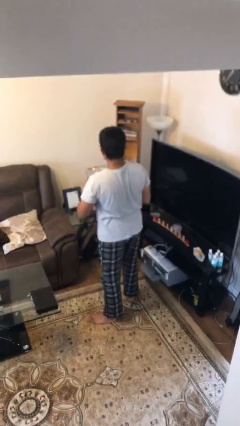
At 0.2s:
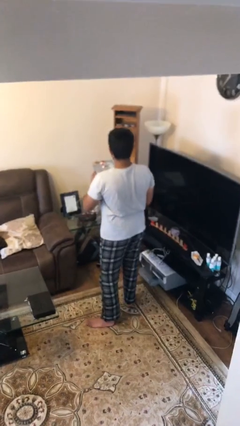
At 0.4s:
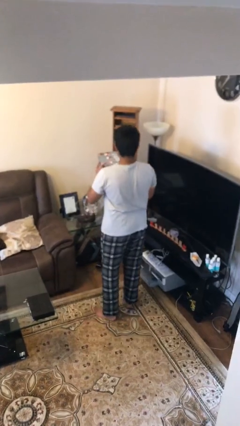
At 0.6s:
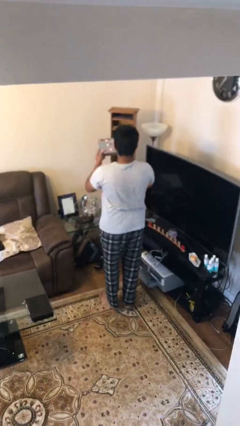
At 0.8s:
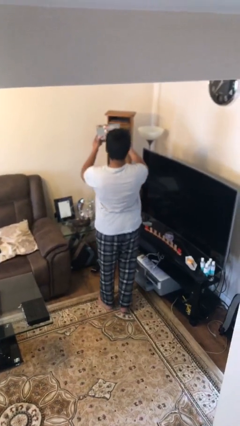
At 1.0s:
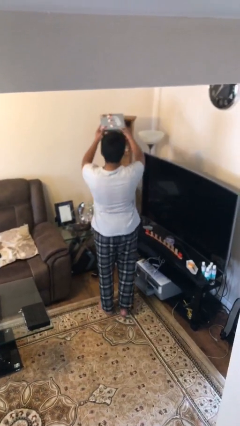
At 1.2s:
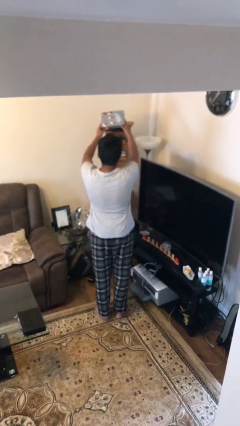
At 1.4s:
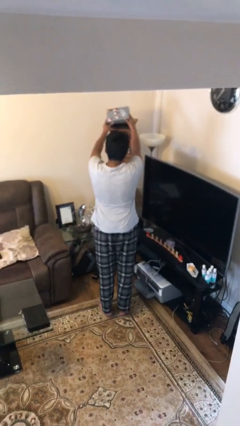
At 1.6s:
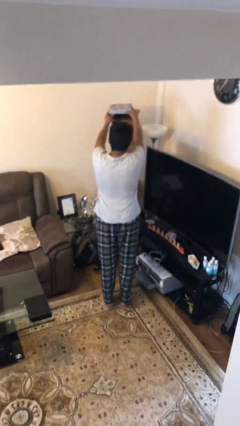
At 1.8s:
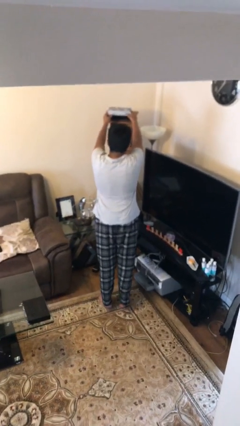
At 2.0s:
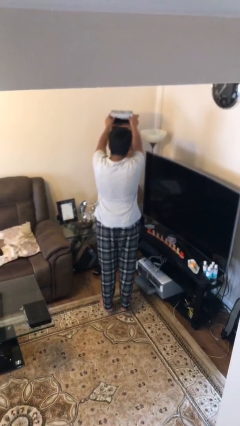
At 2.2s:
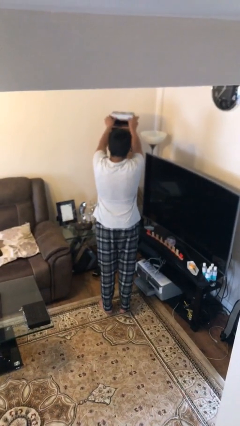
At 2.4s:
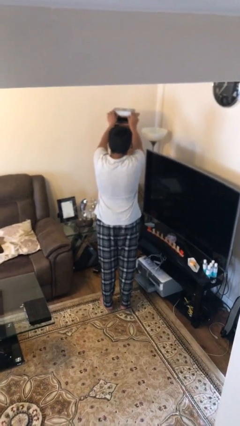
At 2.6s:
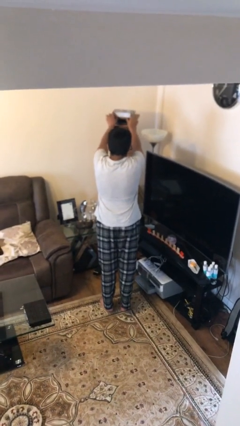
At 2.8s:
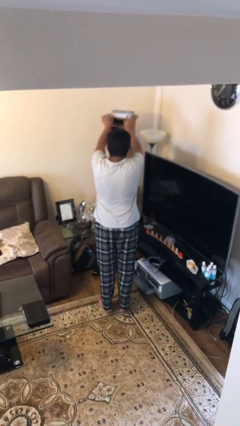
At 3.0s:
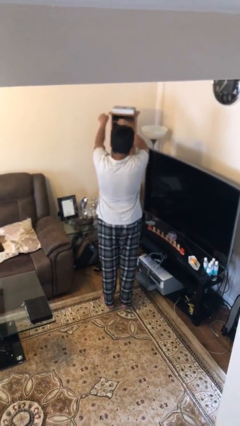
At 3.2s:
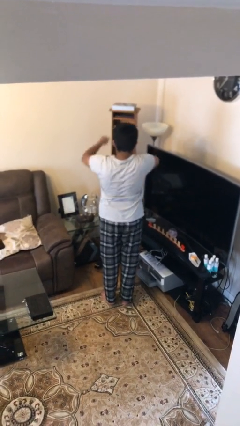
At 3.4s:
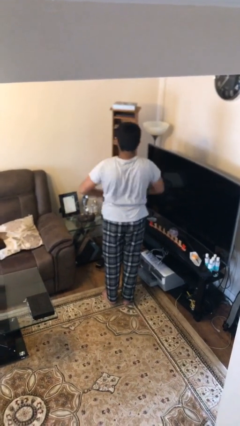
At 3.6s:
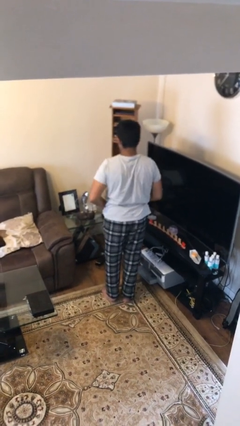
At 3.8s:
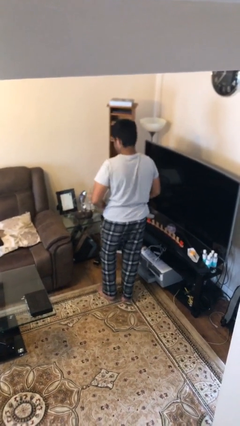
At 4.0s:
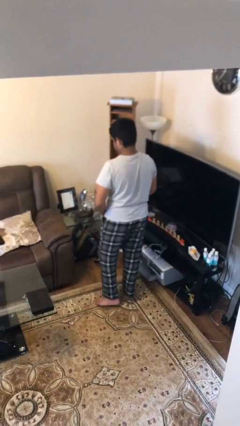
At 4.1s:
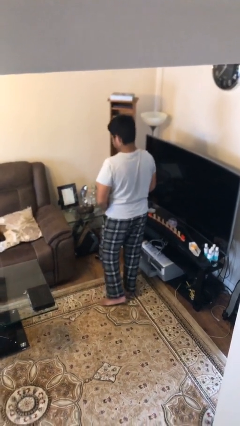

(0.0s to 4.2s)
person puts down object on shelf

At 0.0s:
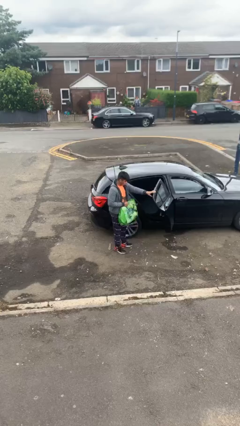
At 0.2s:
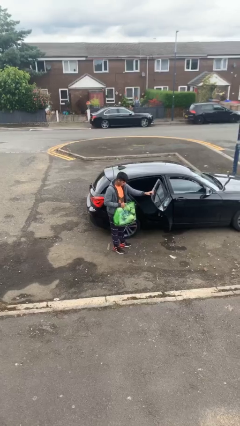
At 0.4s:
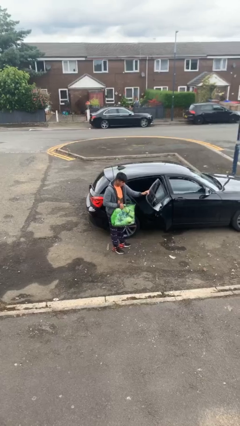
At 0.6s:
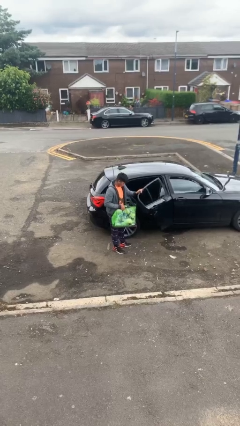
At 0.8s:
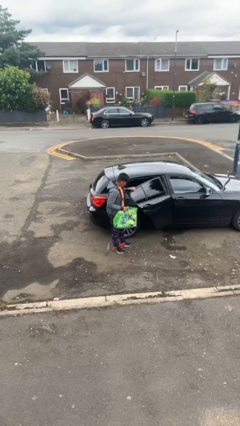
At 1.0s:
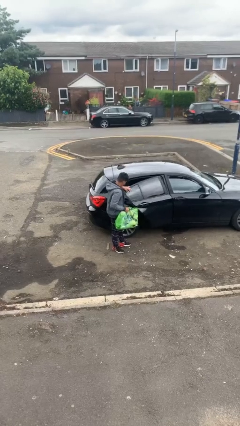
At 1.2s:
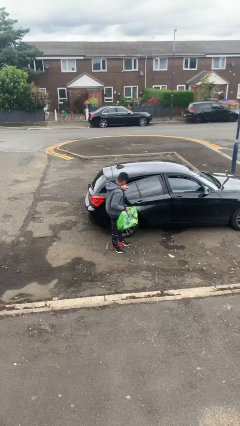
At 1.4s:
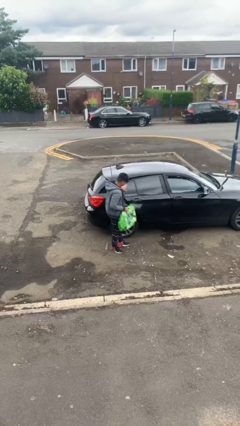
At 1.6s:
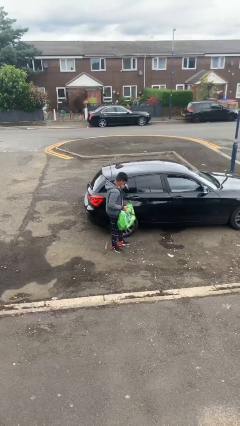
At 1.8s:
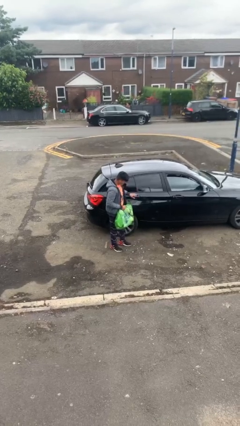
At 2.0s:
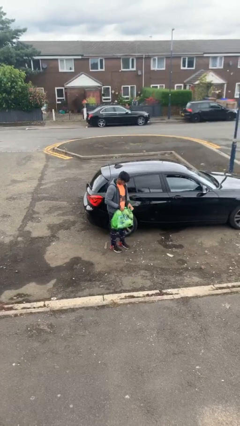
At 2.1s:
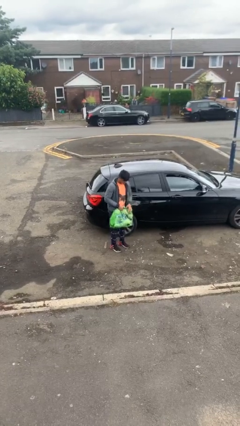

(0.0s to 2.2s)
person closes car door

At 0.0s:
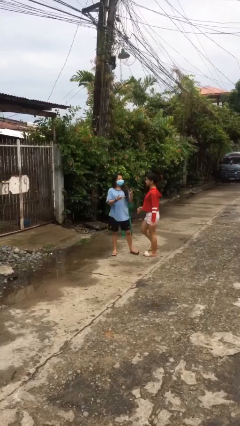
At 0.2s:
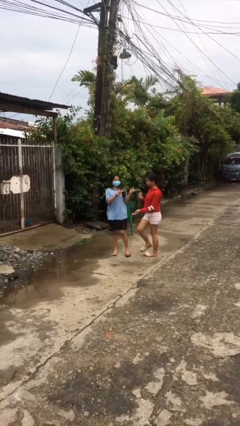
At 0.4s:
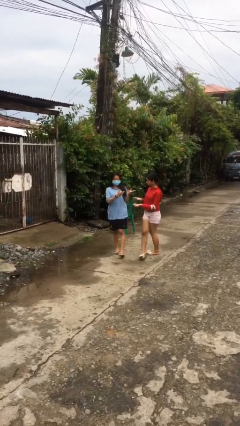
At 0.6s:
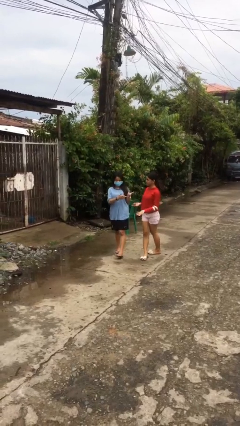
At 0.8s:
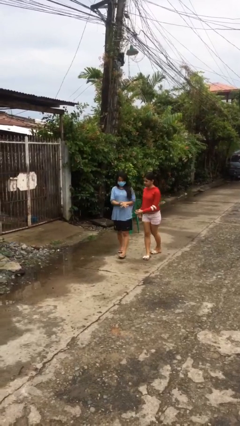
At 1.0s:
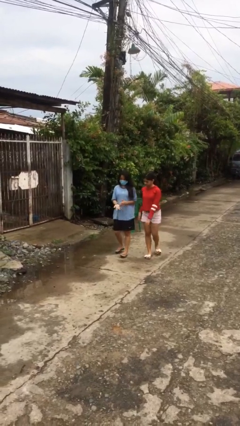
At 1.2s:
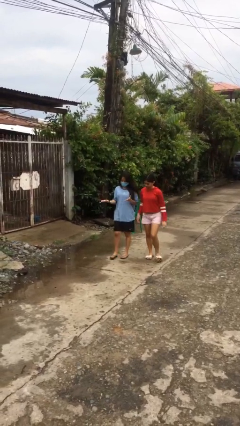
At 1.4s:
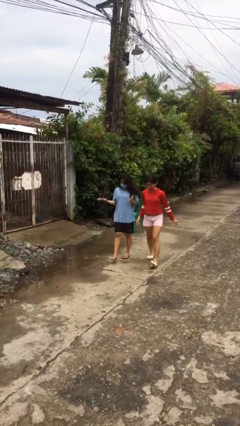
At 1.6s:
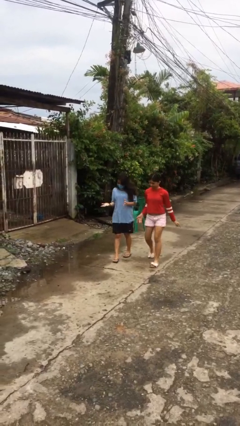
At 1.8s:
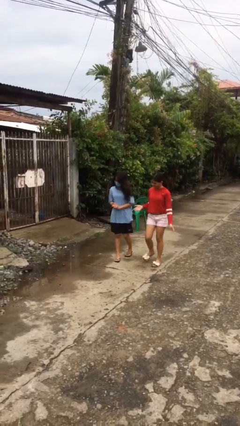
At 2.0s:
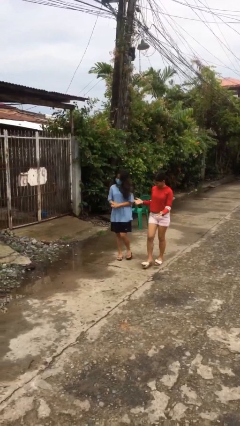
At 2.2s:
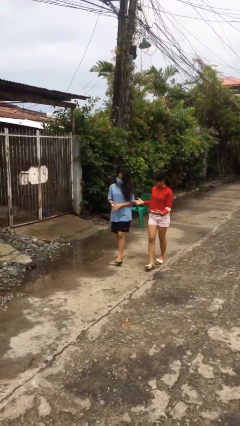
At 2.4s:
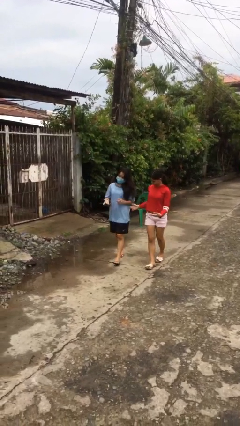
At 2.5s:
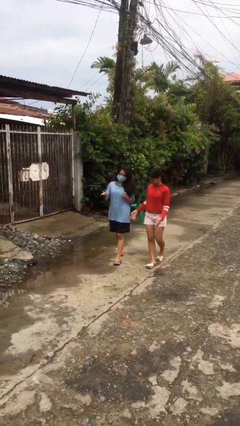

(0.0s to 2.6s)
person talks to person

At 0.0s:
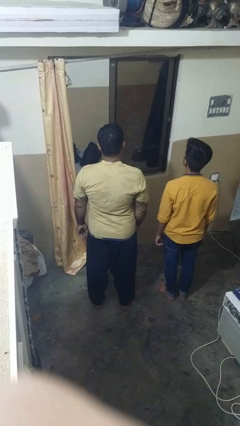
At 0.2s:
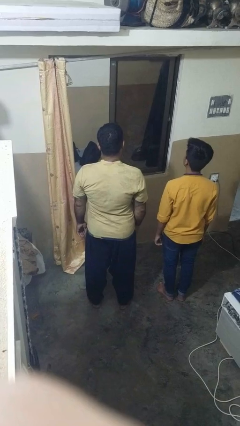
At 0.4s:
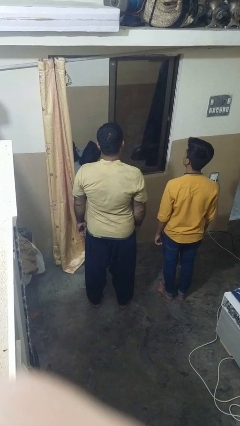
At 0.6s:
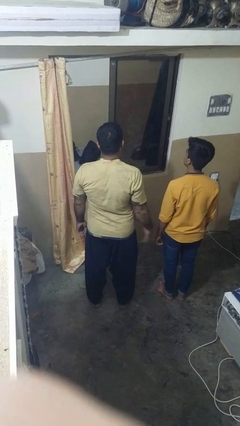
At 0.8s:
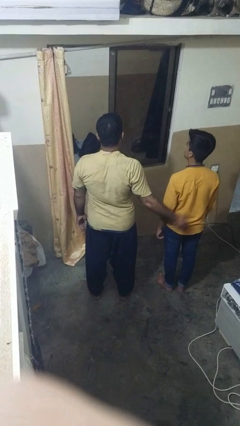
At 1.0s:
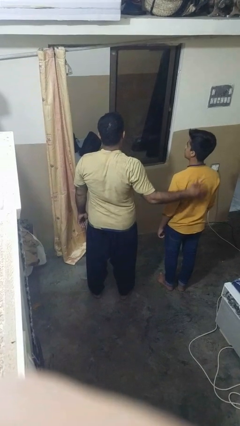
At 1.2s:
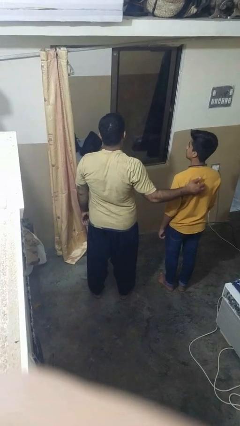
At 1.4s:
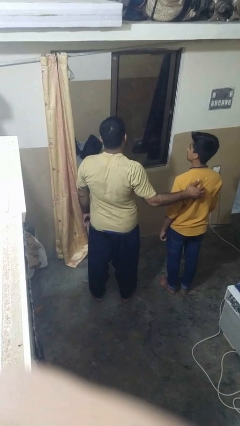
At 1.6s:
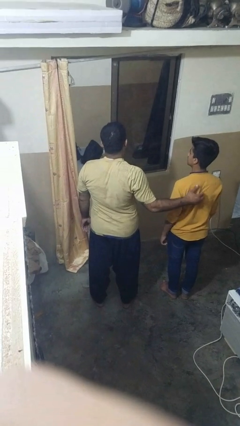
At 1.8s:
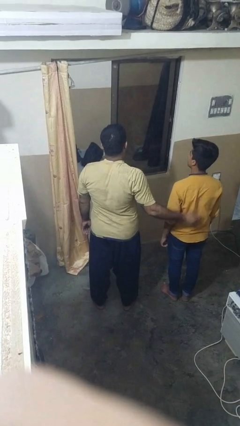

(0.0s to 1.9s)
person touches back of person

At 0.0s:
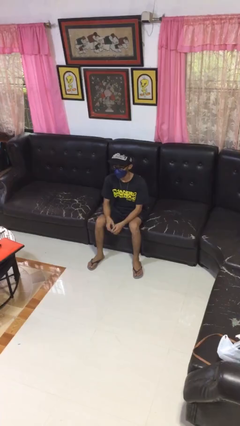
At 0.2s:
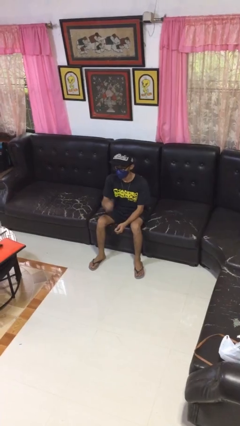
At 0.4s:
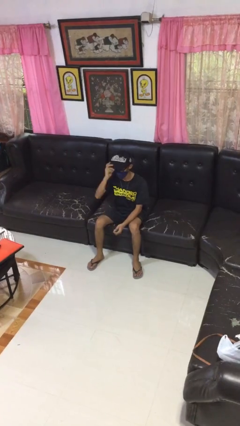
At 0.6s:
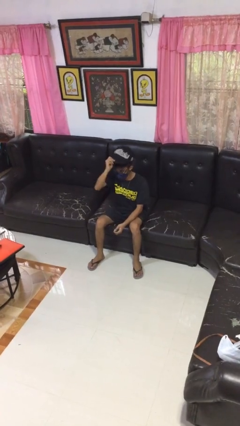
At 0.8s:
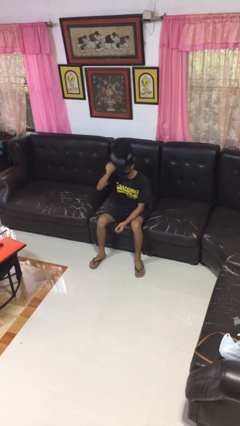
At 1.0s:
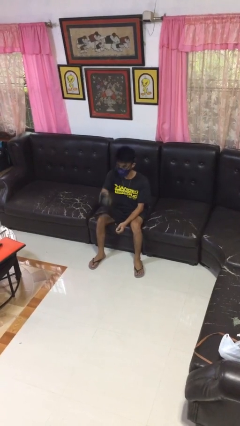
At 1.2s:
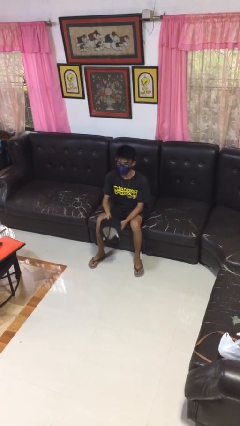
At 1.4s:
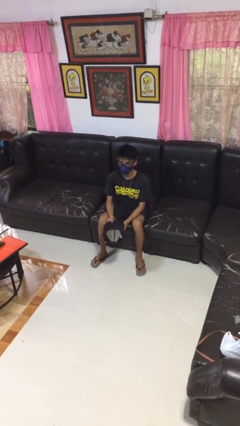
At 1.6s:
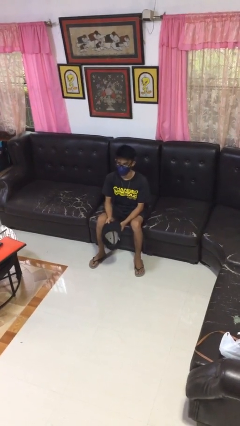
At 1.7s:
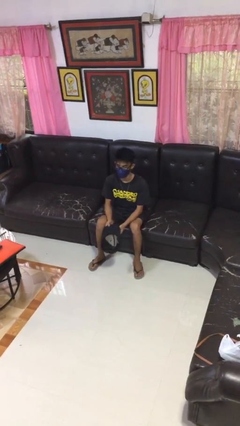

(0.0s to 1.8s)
person takes off hat

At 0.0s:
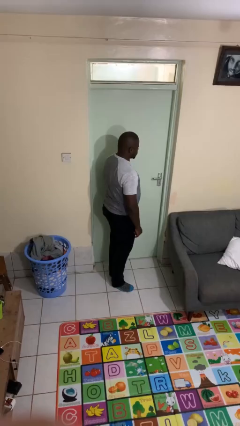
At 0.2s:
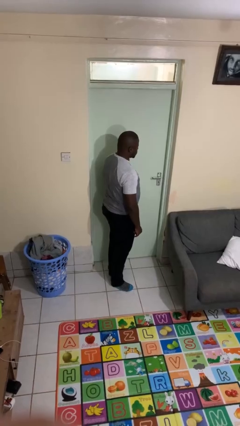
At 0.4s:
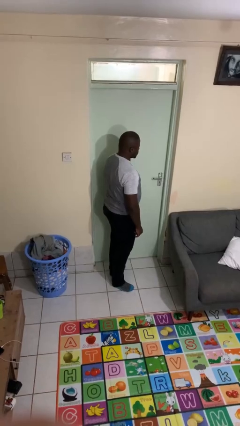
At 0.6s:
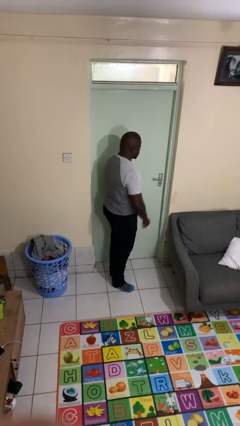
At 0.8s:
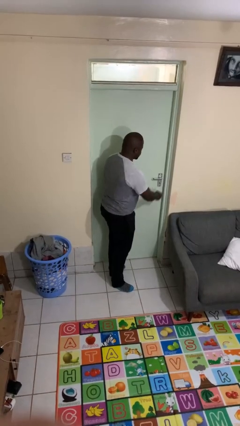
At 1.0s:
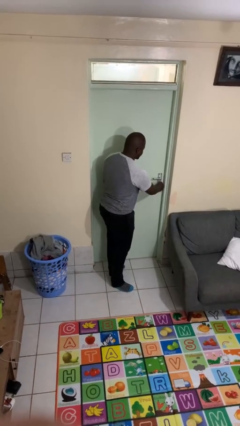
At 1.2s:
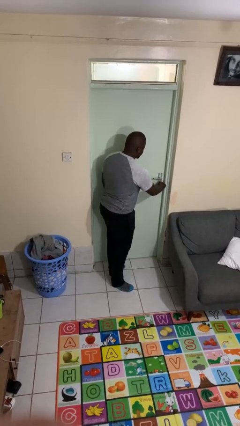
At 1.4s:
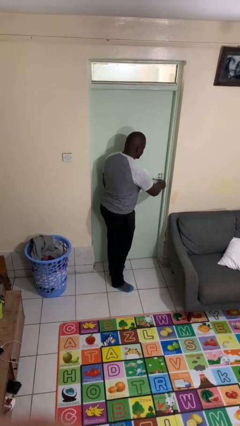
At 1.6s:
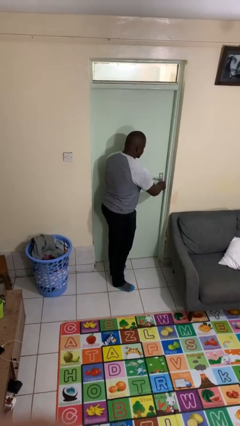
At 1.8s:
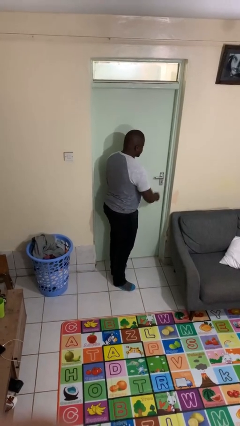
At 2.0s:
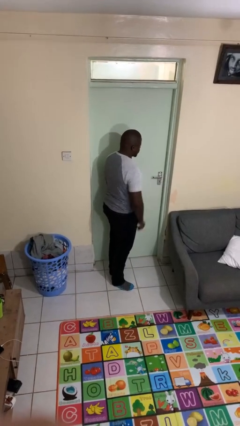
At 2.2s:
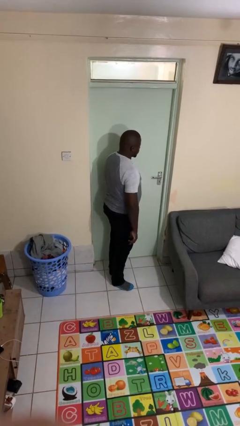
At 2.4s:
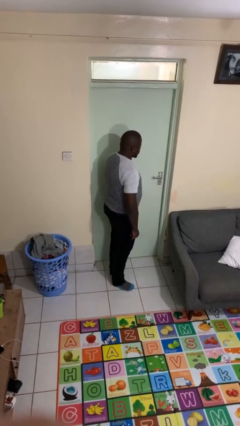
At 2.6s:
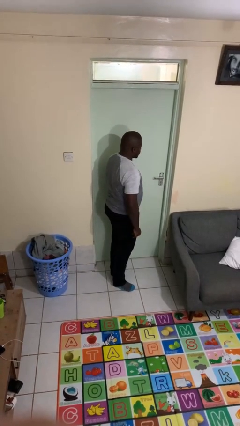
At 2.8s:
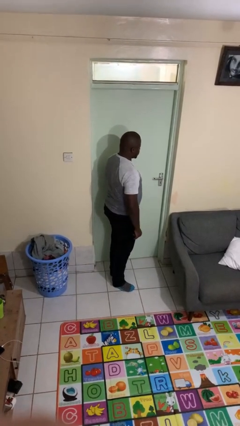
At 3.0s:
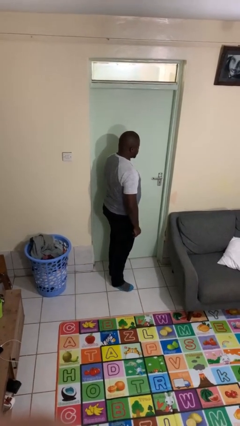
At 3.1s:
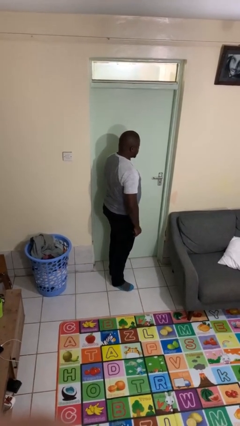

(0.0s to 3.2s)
person unlocks door with keys

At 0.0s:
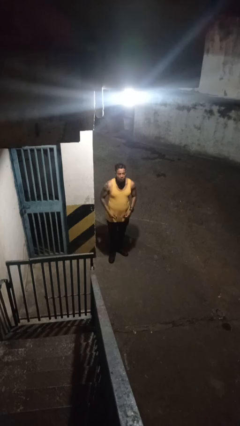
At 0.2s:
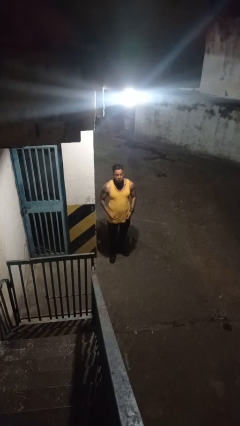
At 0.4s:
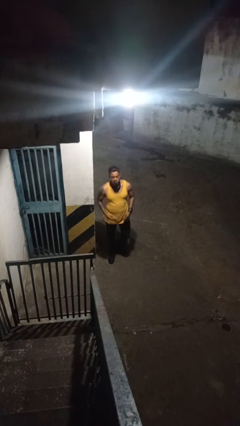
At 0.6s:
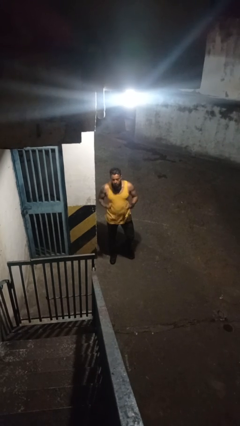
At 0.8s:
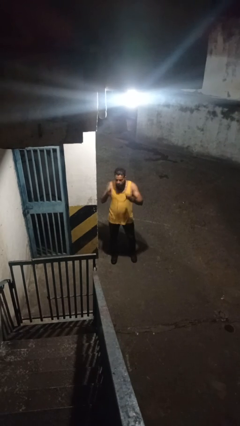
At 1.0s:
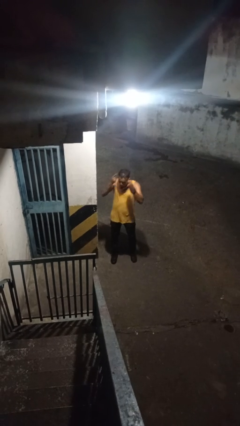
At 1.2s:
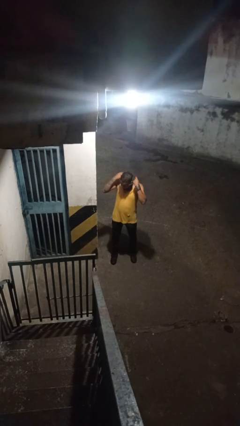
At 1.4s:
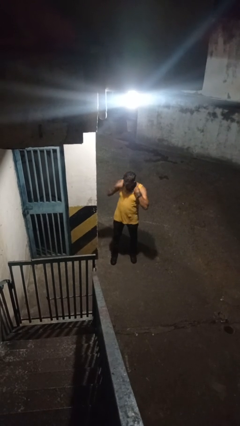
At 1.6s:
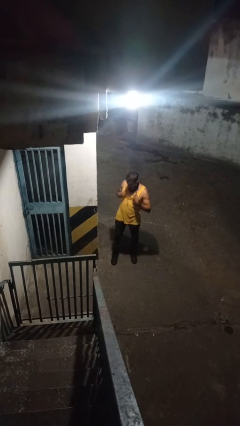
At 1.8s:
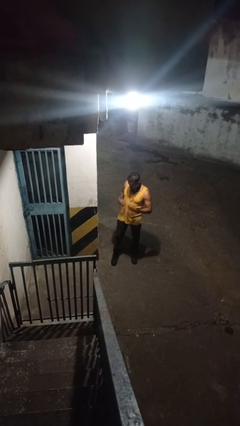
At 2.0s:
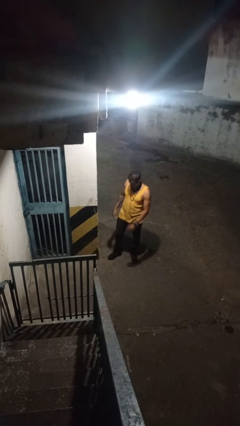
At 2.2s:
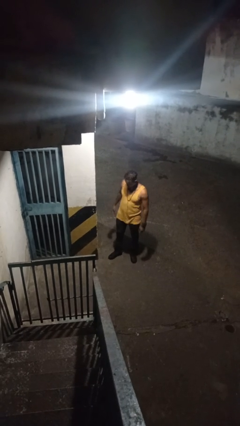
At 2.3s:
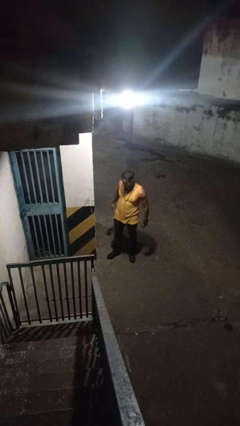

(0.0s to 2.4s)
person puts on necklace
